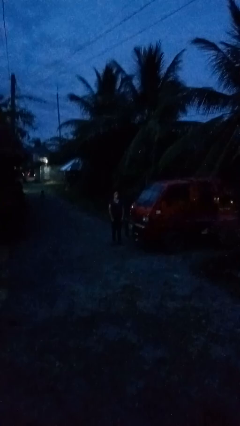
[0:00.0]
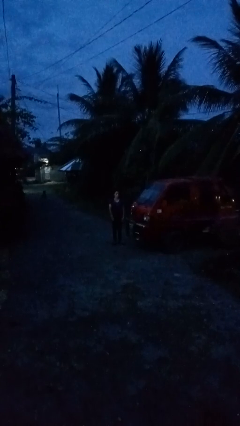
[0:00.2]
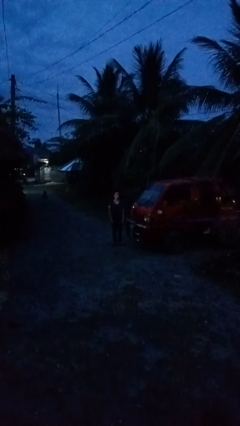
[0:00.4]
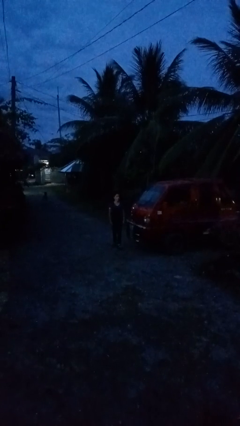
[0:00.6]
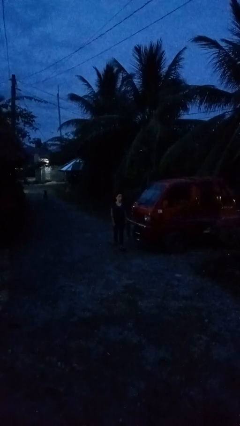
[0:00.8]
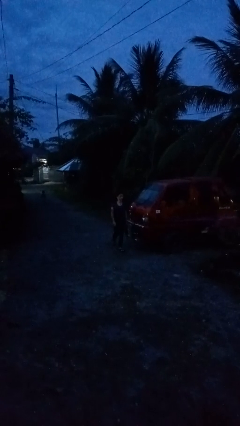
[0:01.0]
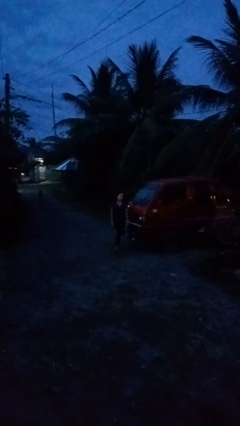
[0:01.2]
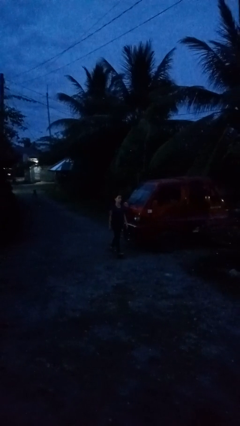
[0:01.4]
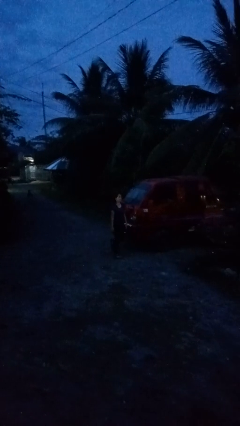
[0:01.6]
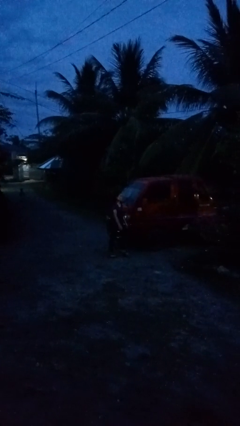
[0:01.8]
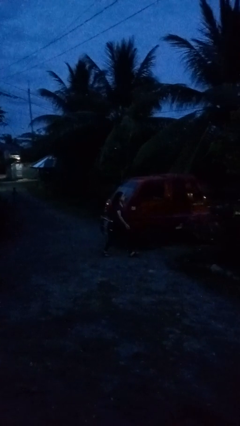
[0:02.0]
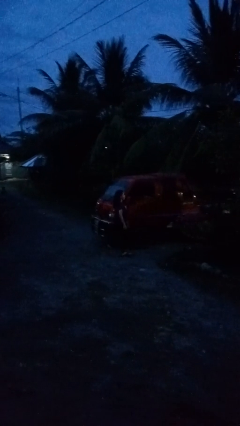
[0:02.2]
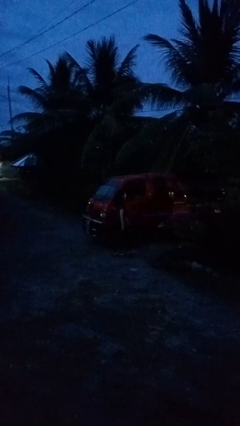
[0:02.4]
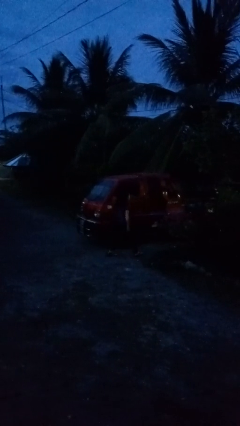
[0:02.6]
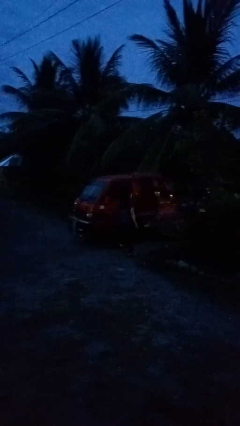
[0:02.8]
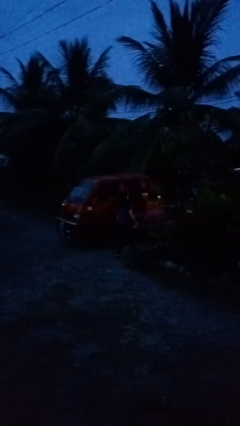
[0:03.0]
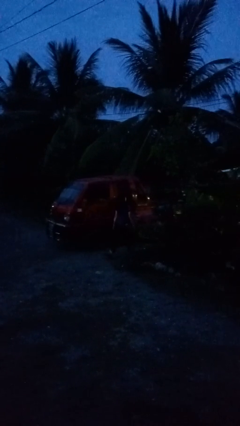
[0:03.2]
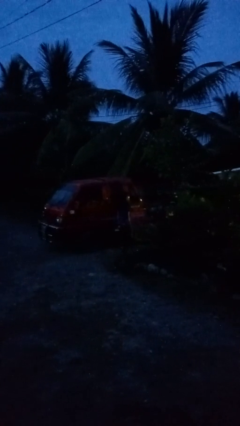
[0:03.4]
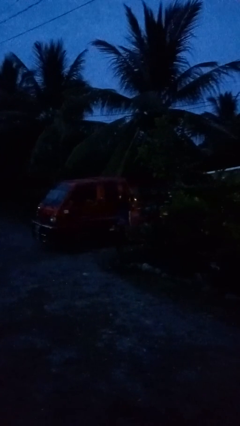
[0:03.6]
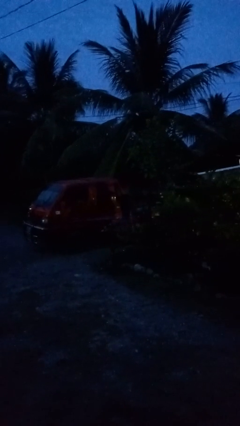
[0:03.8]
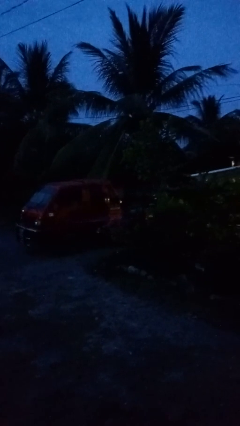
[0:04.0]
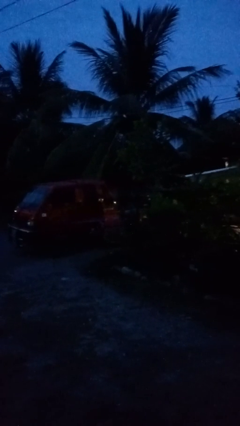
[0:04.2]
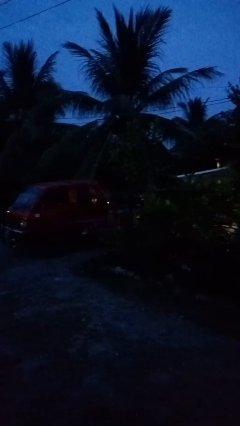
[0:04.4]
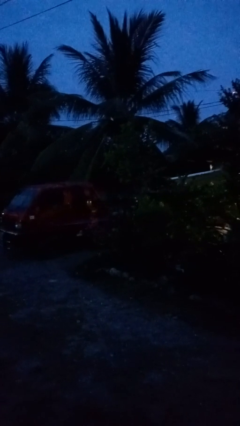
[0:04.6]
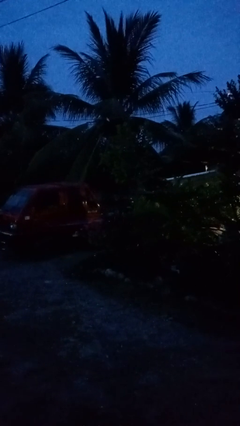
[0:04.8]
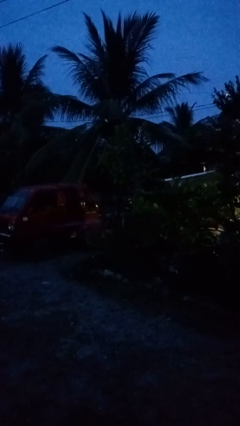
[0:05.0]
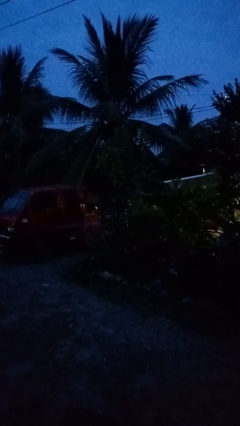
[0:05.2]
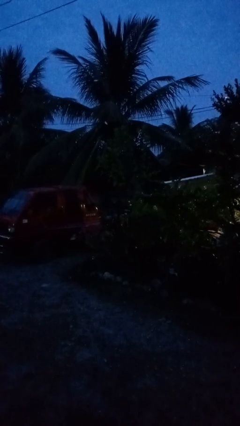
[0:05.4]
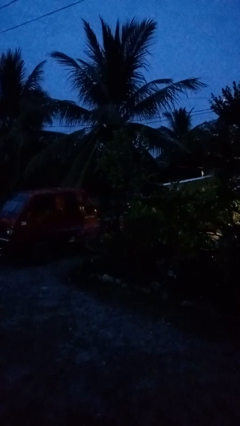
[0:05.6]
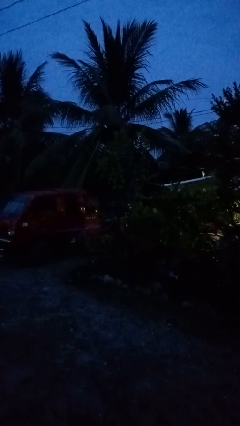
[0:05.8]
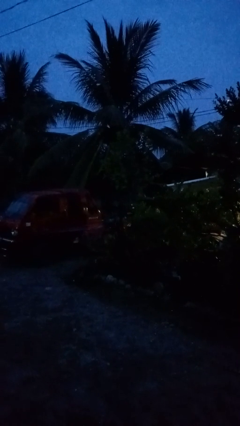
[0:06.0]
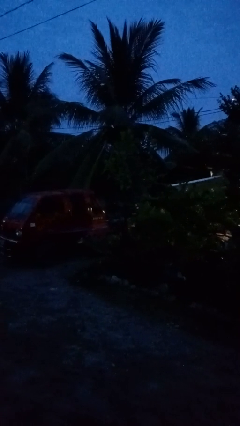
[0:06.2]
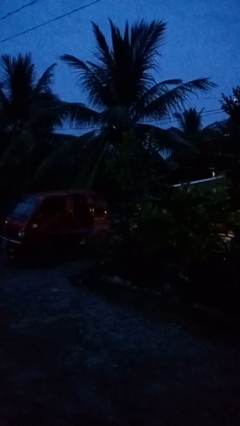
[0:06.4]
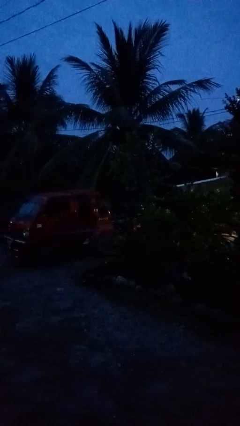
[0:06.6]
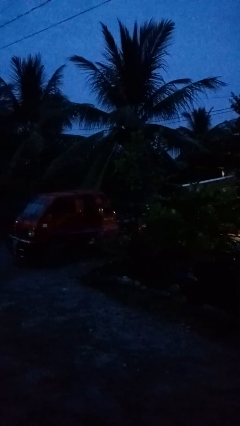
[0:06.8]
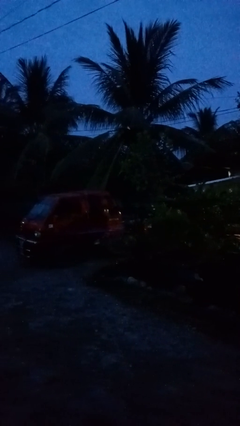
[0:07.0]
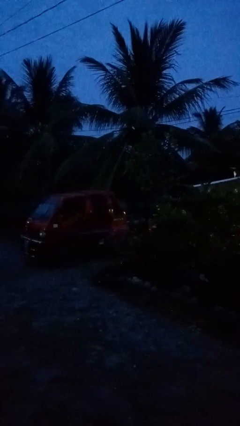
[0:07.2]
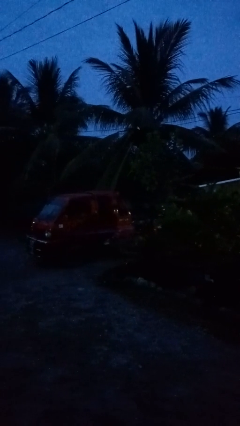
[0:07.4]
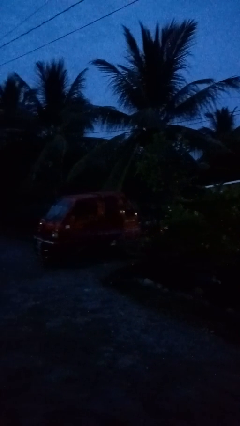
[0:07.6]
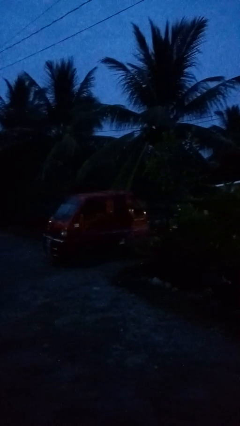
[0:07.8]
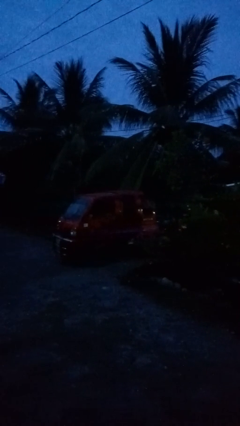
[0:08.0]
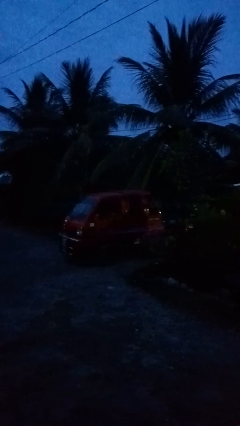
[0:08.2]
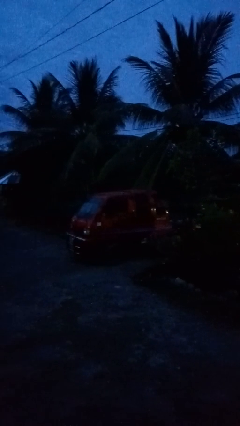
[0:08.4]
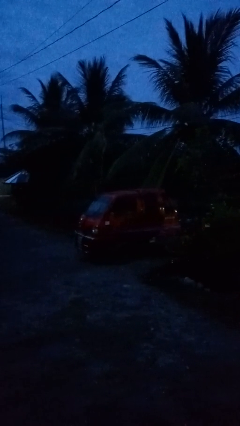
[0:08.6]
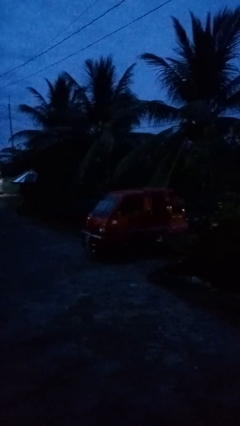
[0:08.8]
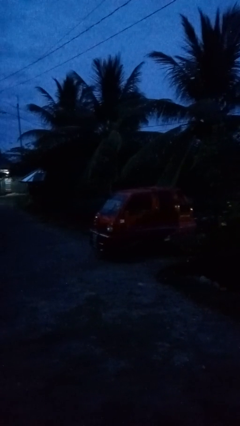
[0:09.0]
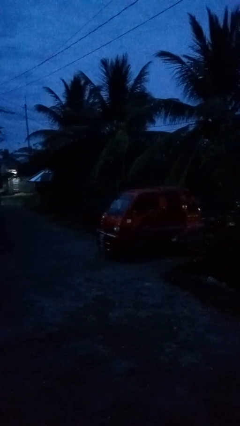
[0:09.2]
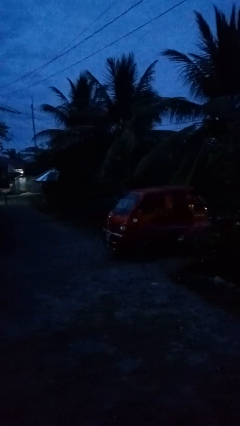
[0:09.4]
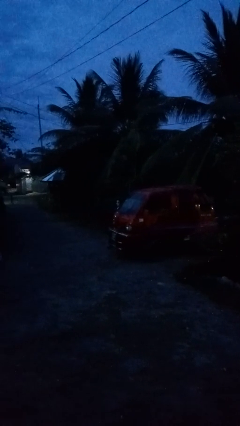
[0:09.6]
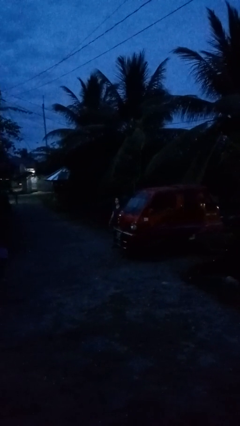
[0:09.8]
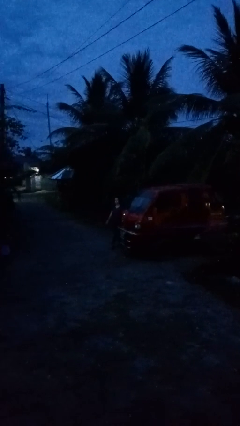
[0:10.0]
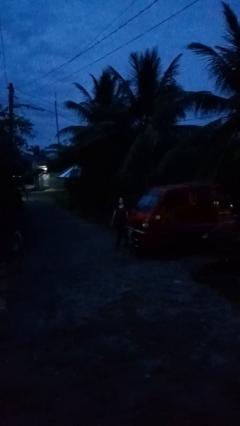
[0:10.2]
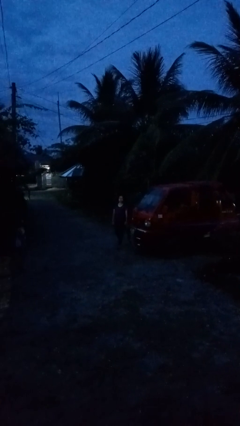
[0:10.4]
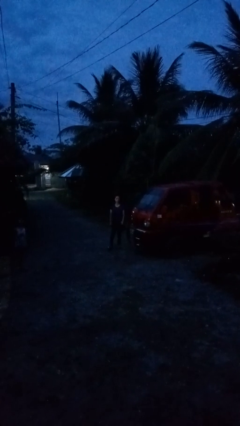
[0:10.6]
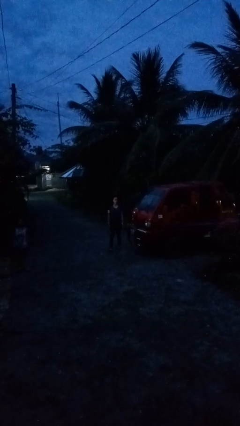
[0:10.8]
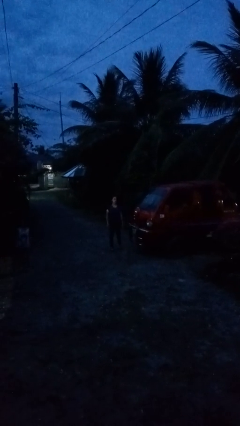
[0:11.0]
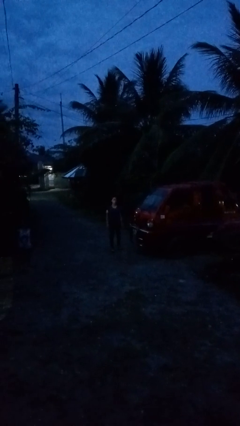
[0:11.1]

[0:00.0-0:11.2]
person walks around car

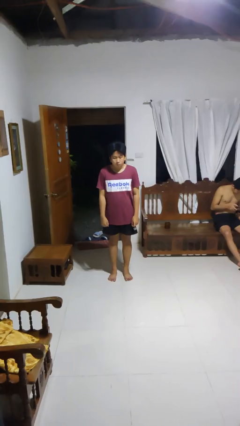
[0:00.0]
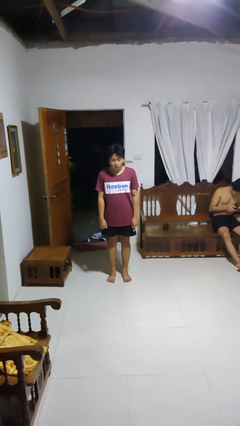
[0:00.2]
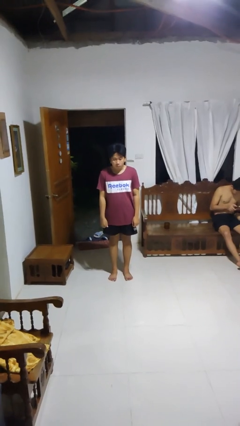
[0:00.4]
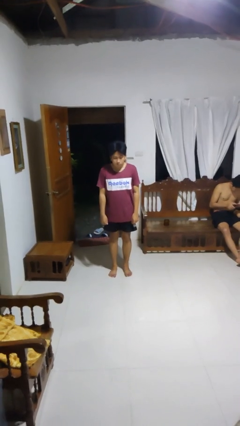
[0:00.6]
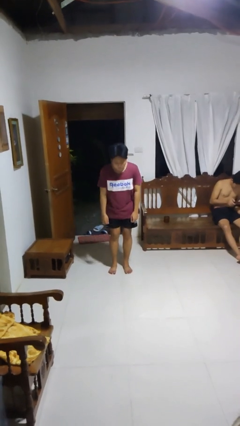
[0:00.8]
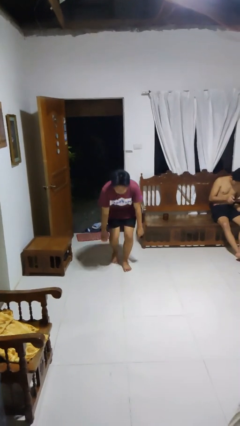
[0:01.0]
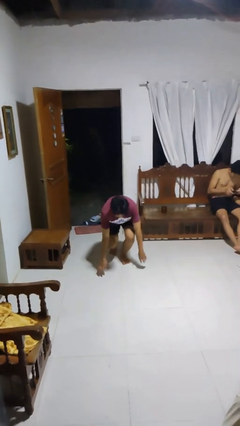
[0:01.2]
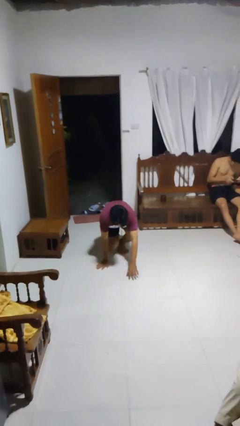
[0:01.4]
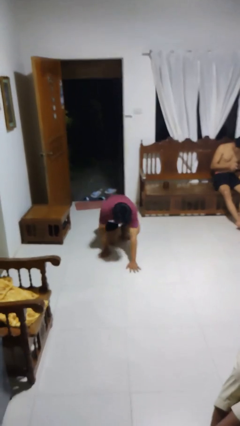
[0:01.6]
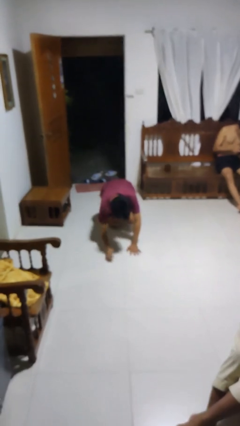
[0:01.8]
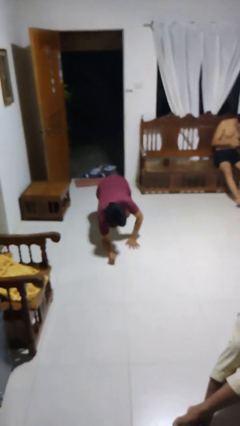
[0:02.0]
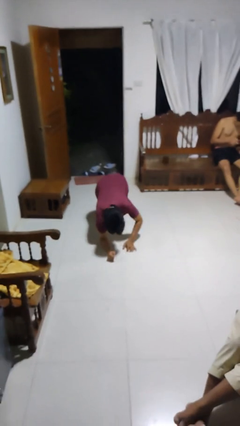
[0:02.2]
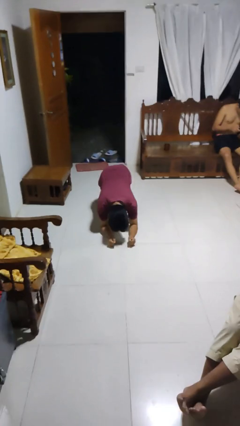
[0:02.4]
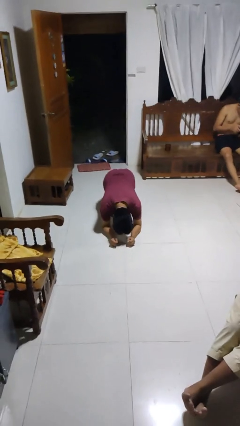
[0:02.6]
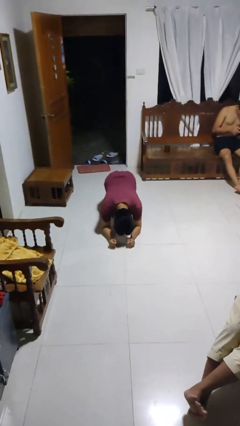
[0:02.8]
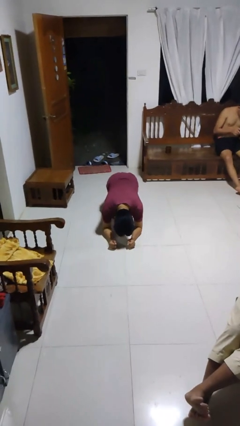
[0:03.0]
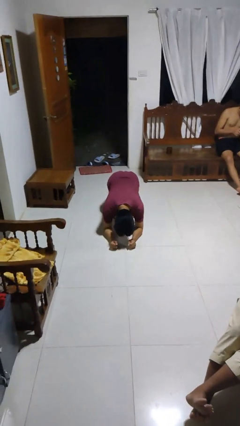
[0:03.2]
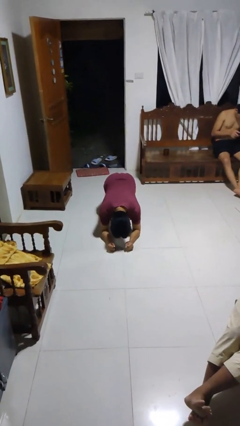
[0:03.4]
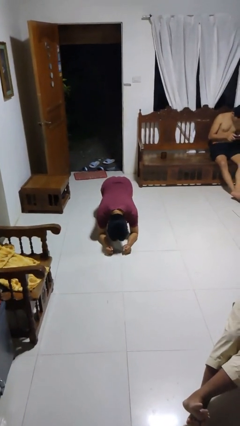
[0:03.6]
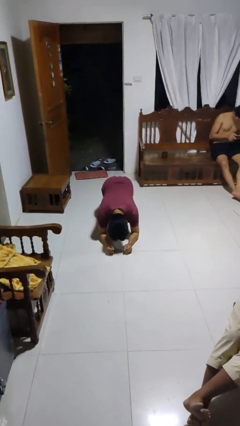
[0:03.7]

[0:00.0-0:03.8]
person exercises with plank

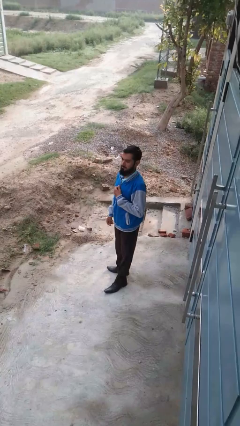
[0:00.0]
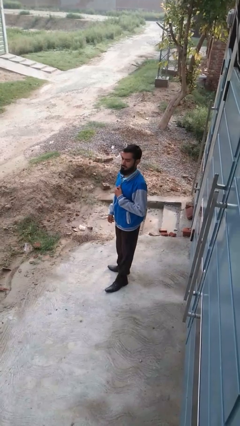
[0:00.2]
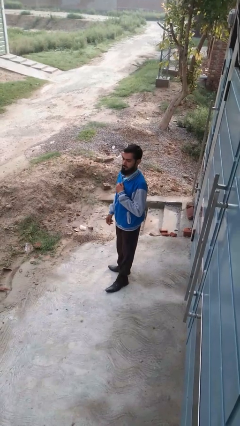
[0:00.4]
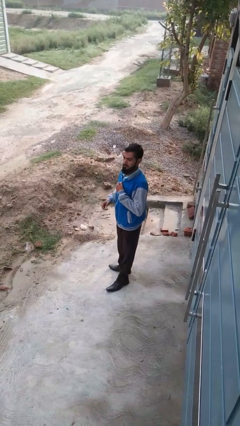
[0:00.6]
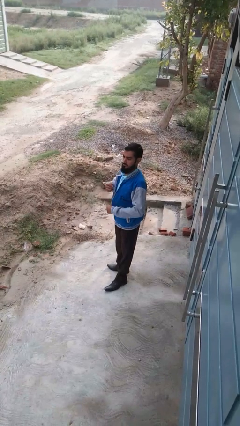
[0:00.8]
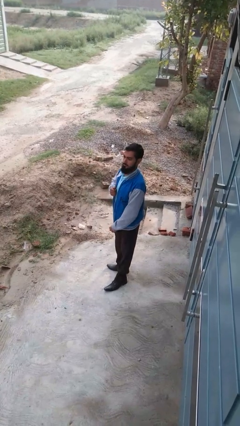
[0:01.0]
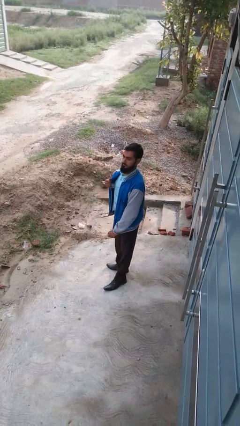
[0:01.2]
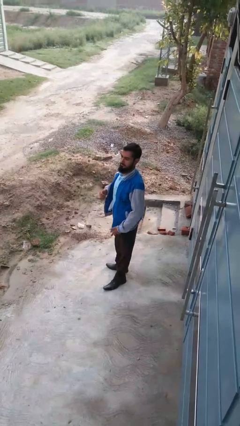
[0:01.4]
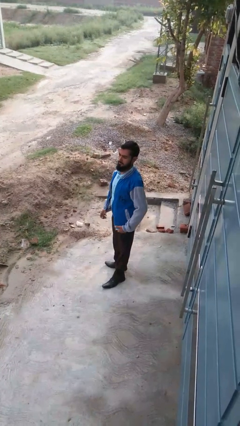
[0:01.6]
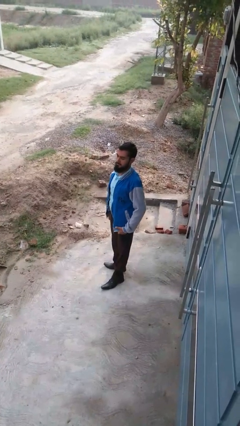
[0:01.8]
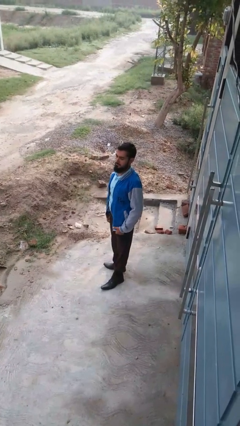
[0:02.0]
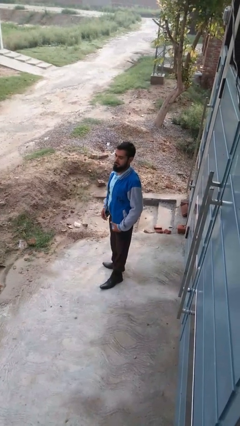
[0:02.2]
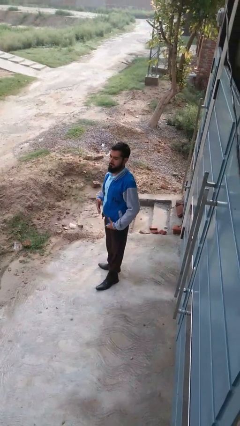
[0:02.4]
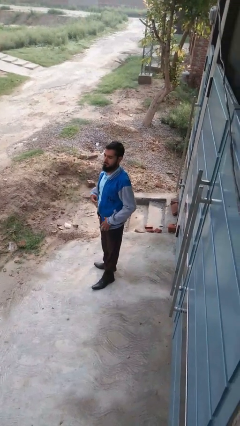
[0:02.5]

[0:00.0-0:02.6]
person unzips jacket

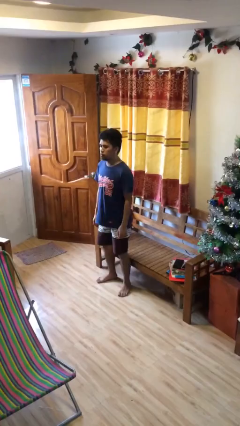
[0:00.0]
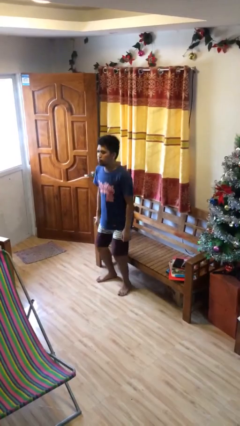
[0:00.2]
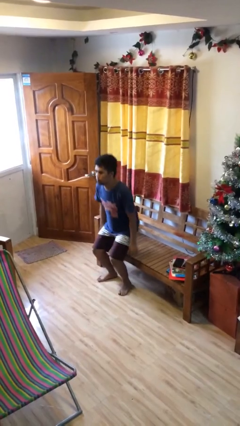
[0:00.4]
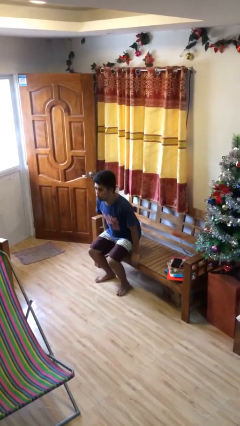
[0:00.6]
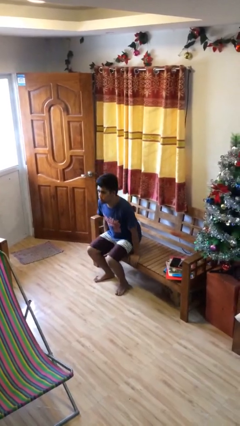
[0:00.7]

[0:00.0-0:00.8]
person sits down
